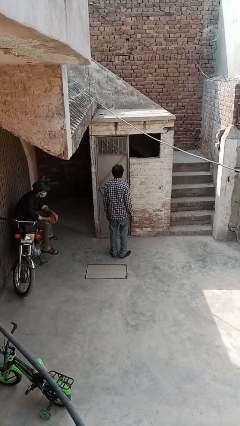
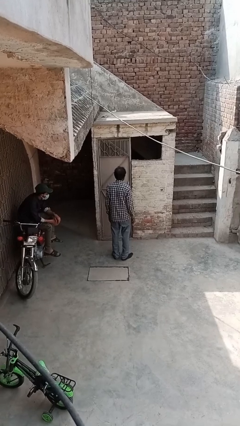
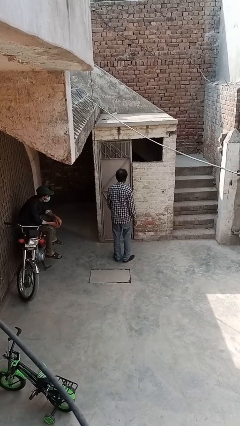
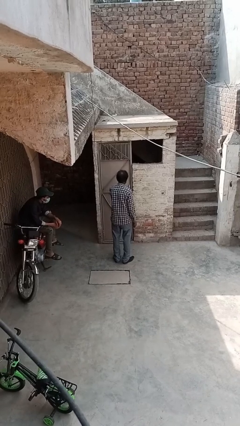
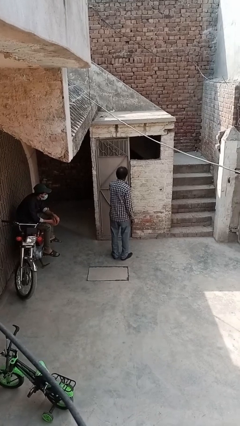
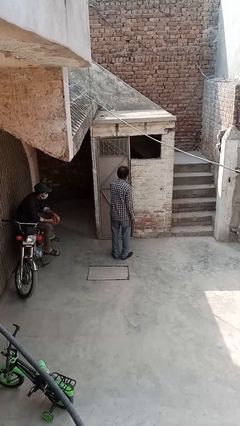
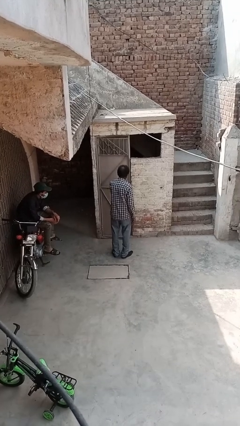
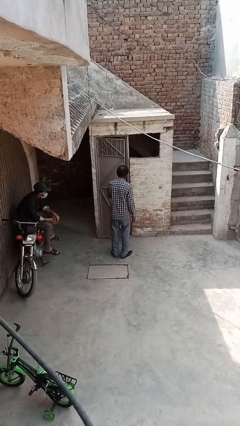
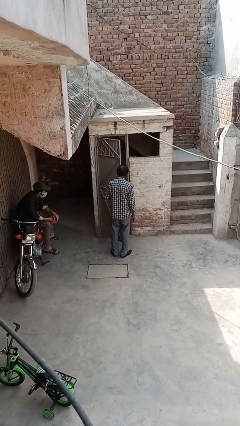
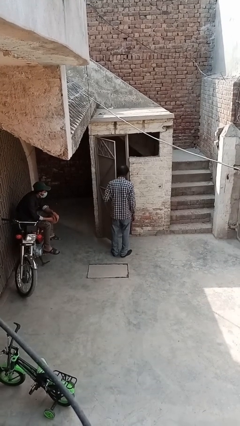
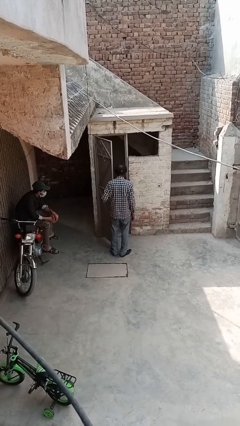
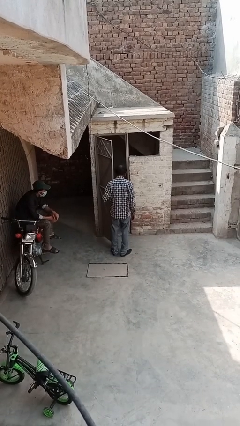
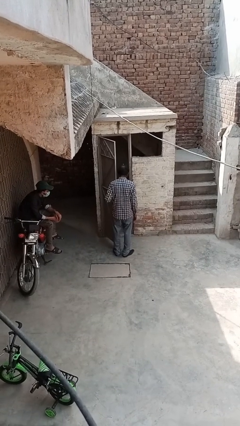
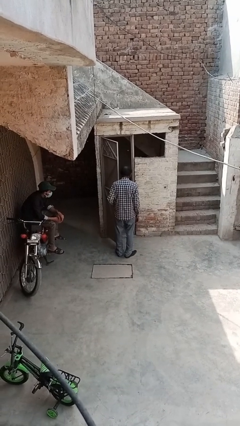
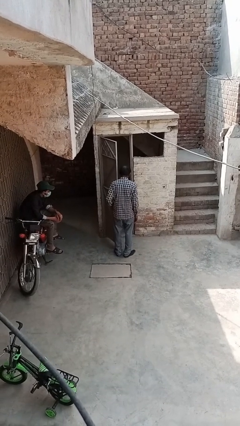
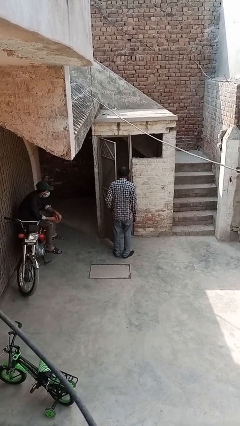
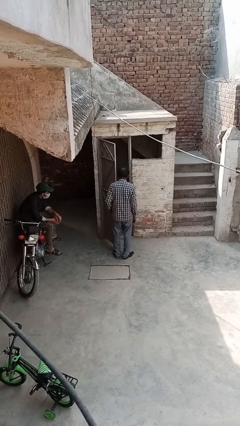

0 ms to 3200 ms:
person opens facility door

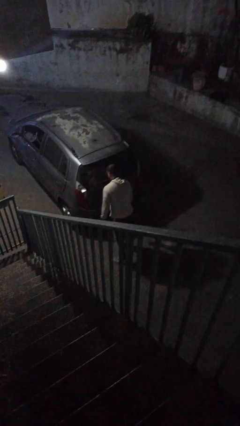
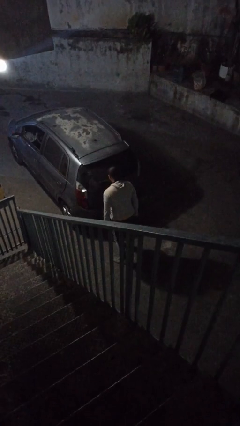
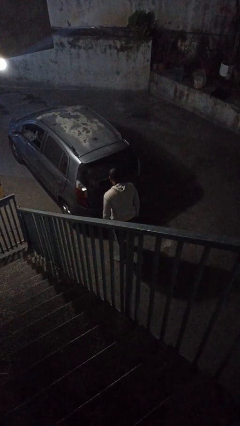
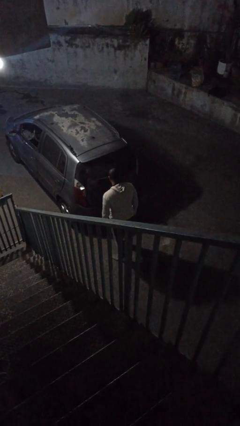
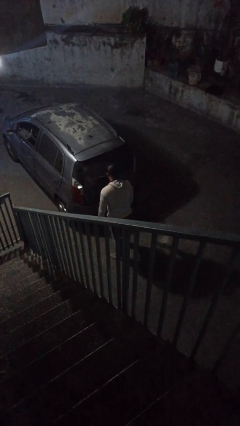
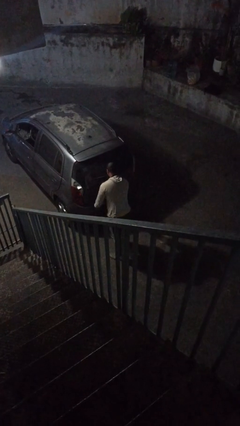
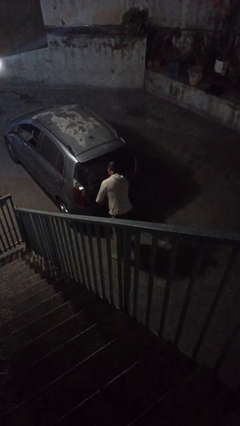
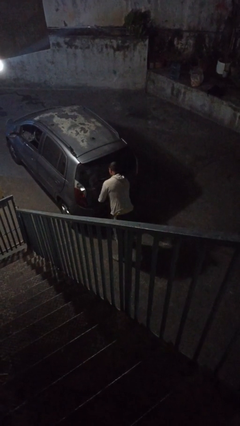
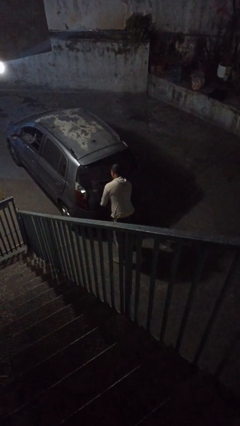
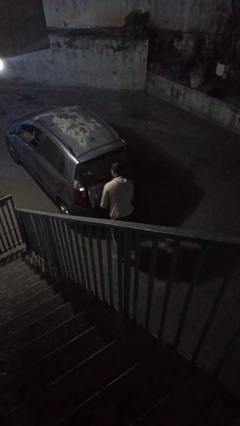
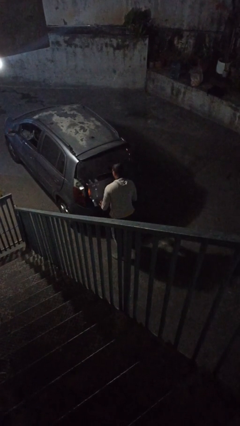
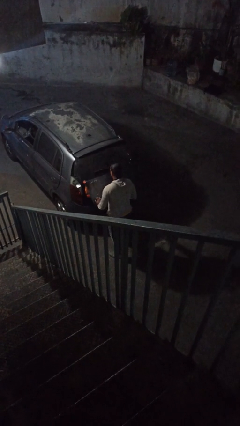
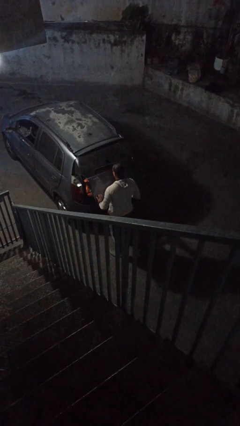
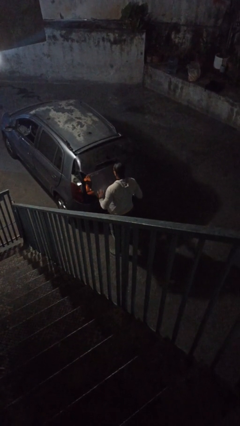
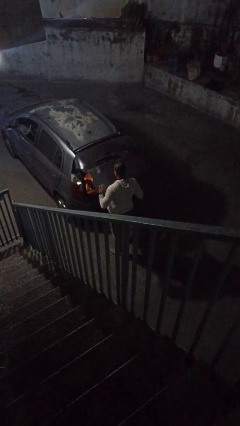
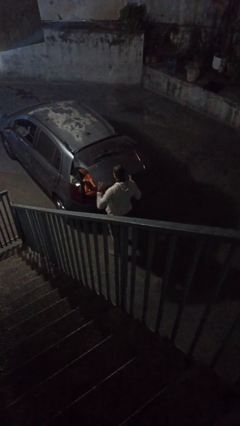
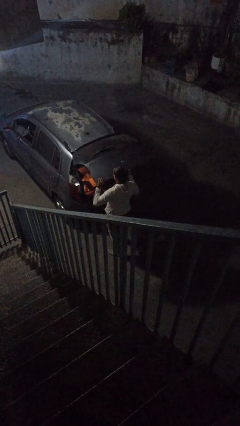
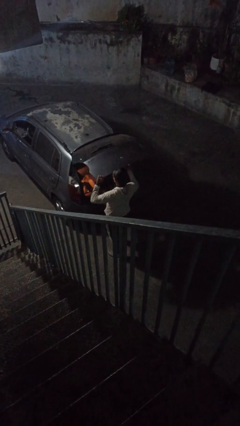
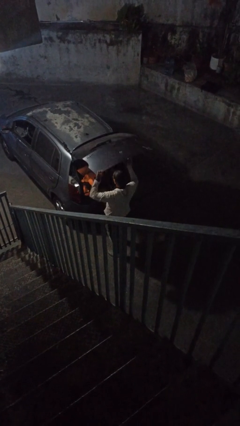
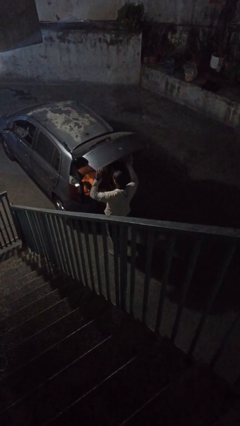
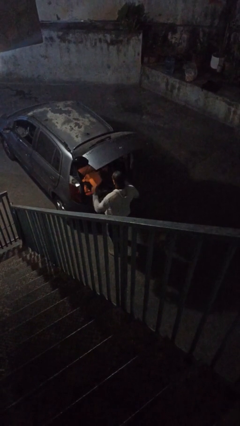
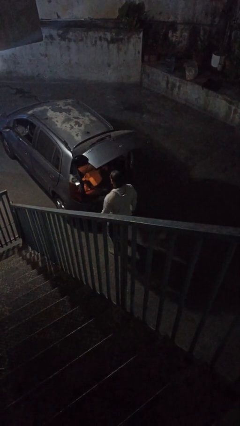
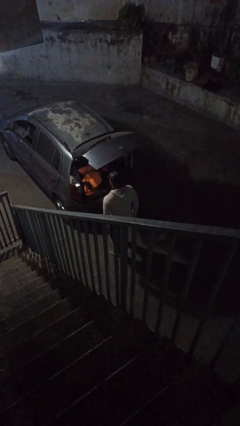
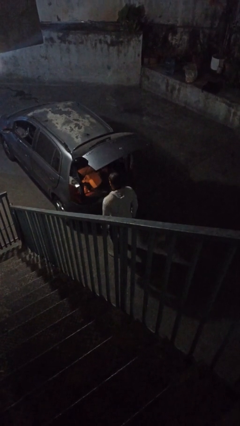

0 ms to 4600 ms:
person opens car trunk

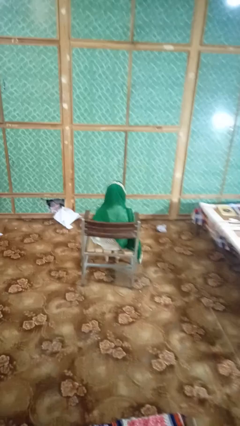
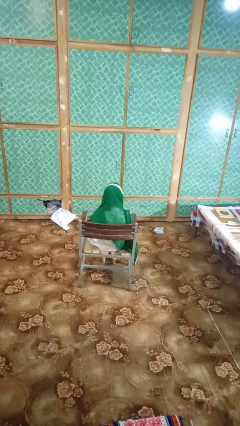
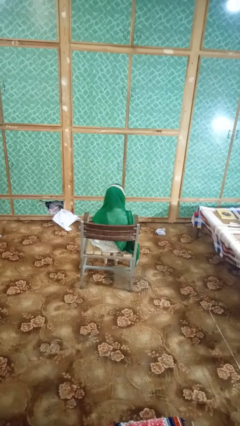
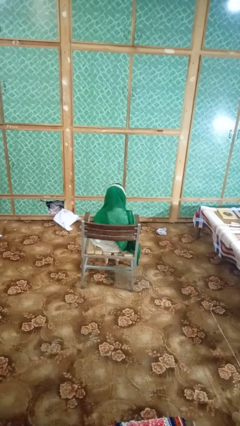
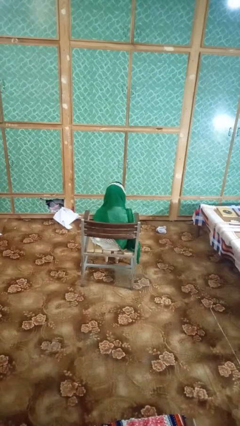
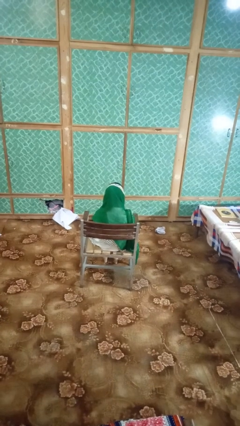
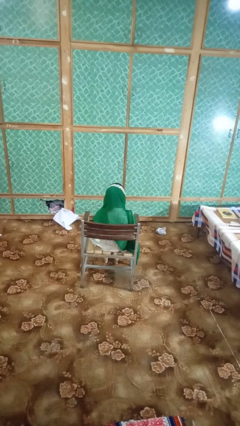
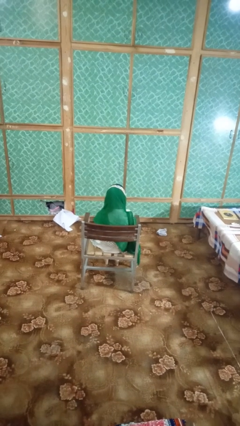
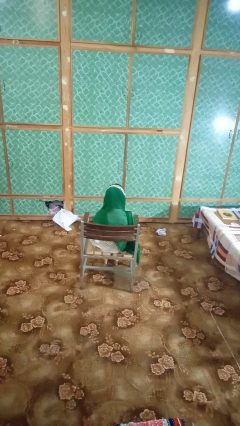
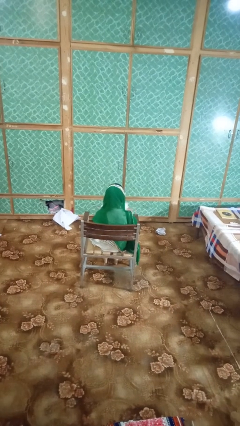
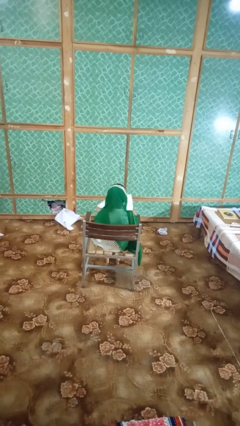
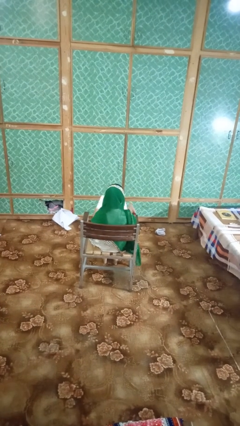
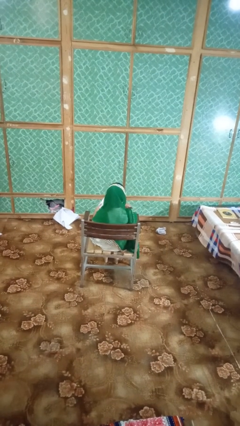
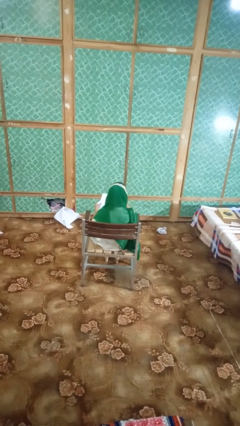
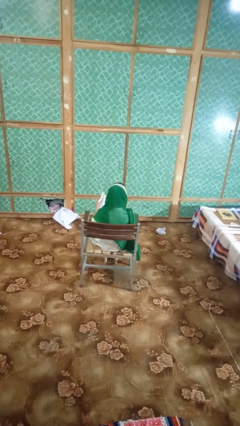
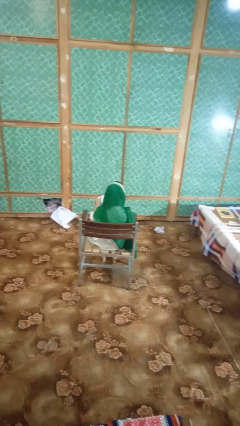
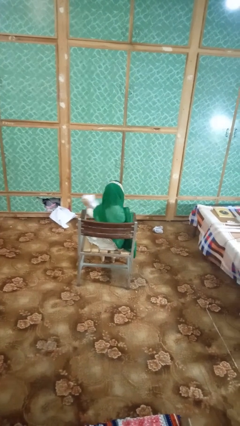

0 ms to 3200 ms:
person tears paper

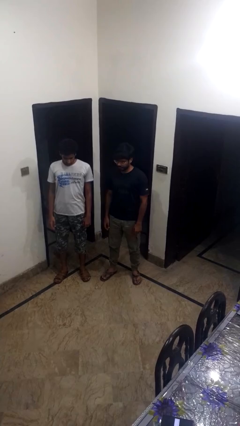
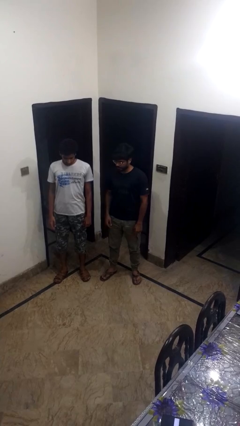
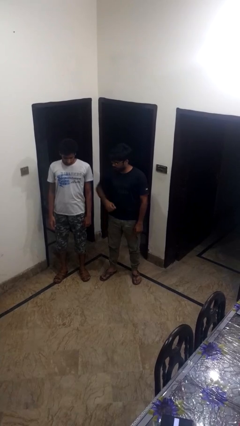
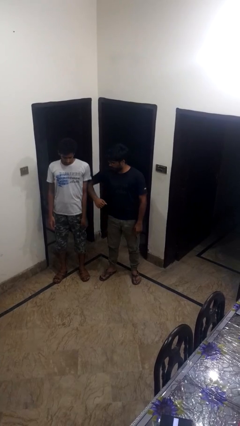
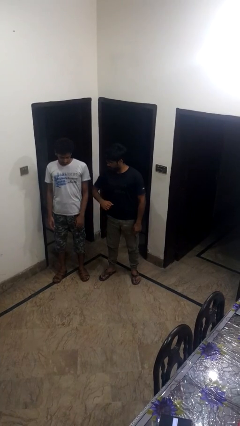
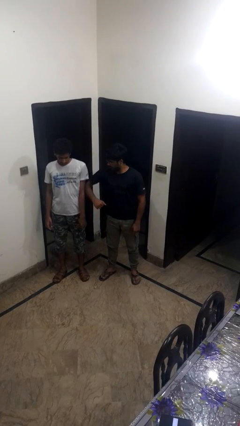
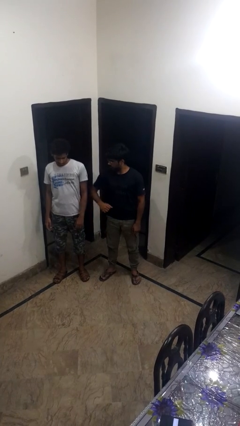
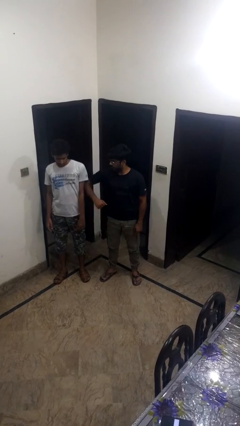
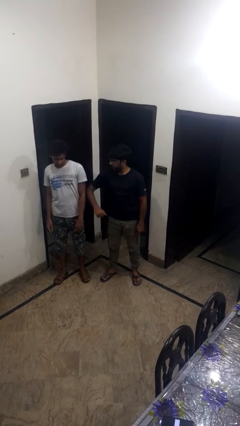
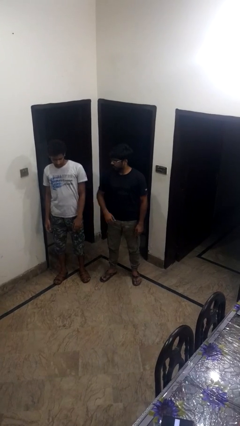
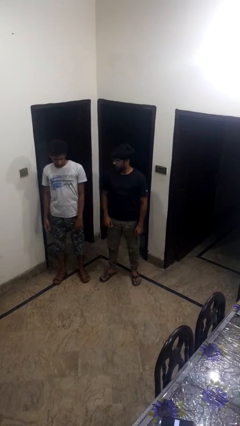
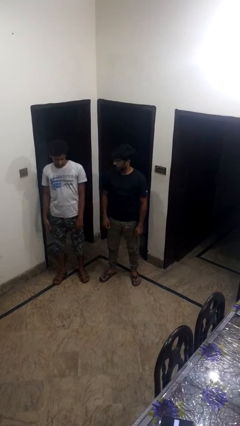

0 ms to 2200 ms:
person nudges person with elbow

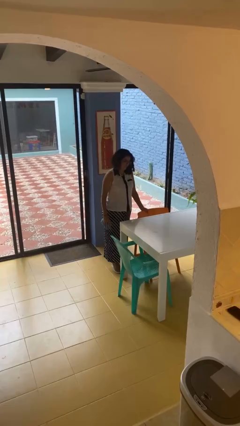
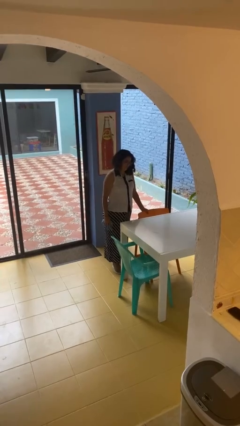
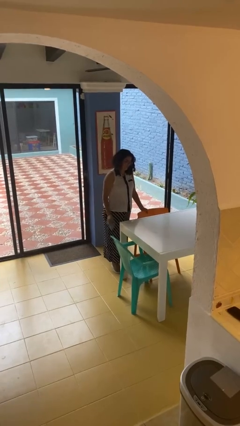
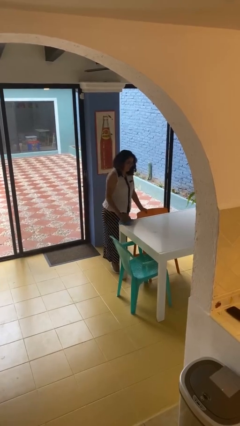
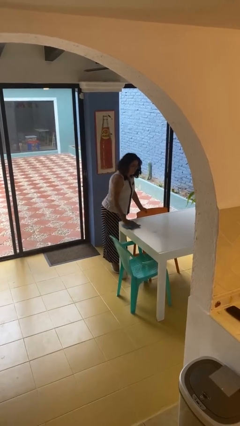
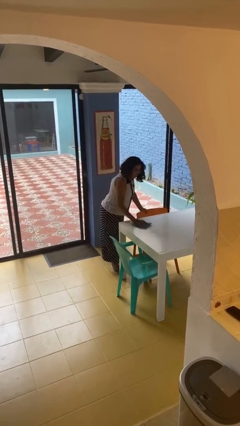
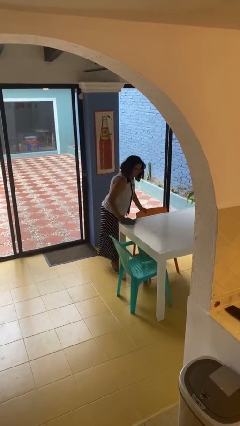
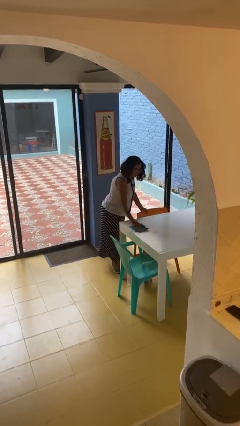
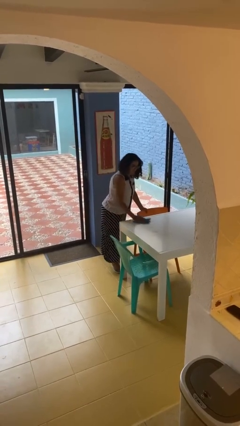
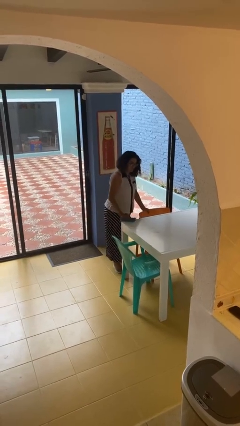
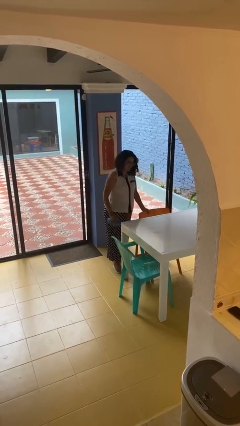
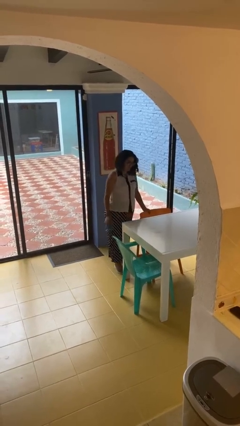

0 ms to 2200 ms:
person cleans table with rag

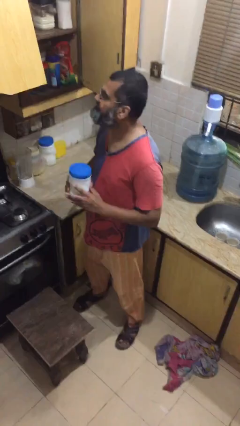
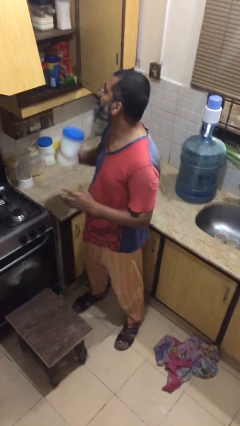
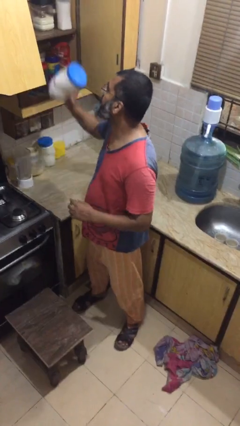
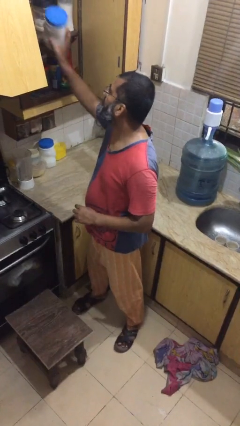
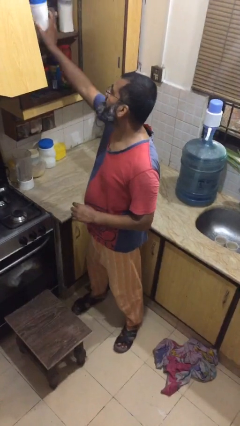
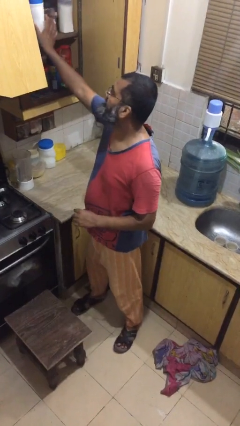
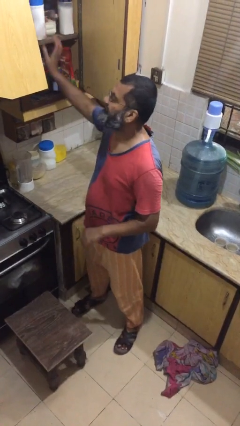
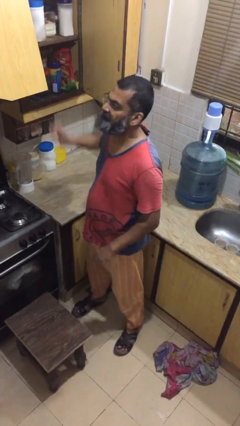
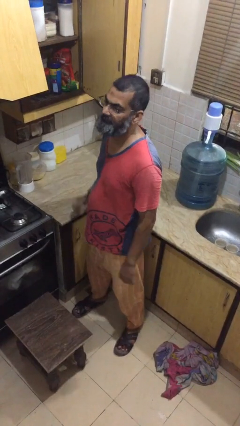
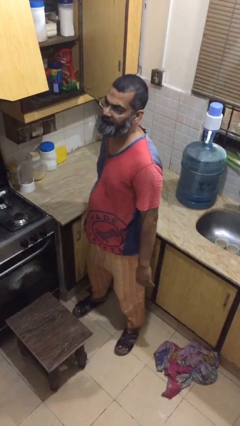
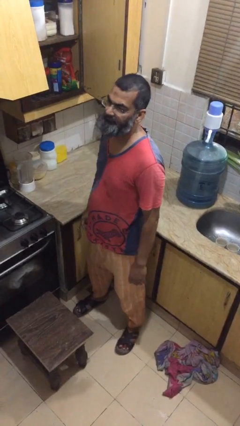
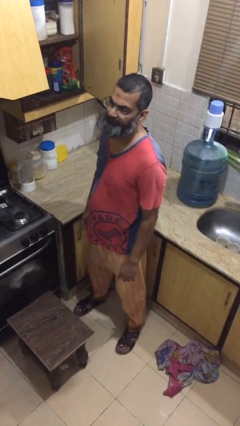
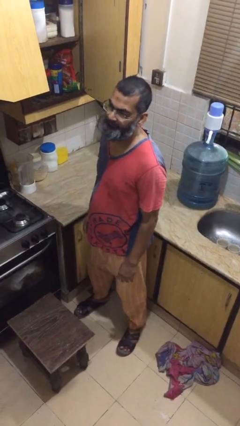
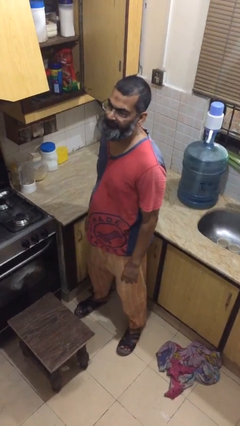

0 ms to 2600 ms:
person puts down object on shelf
